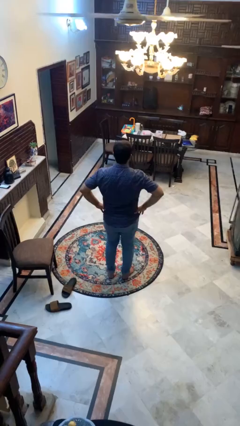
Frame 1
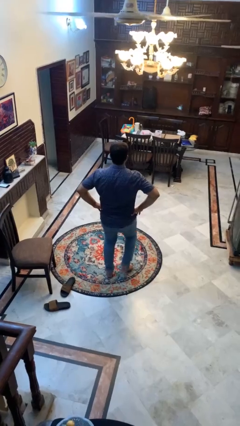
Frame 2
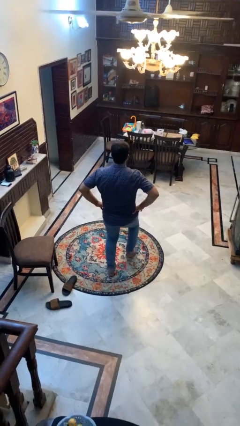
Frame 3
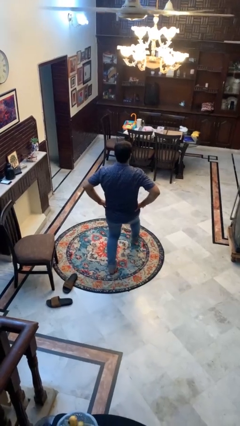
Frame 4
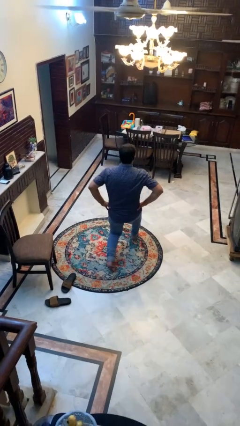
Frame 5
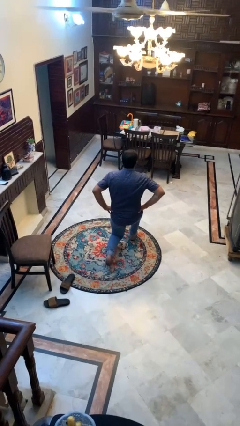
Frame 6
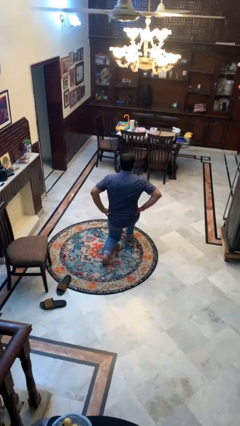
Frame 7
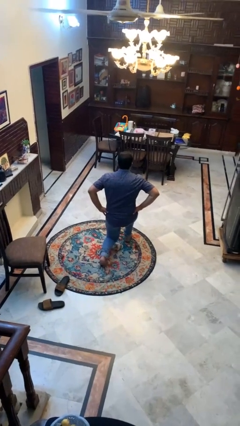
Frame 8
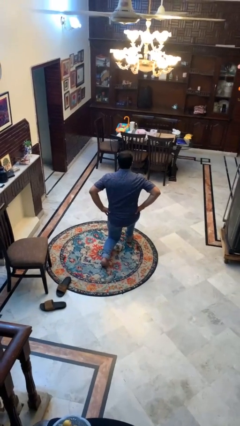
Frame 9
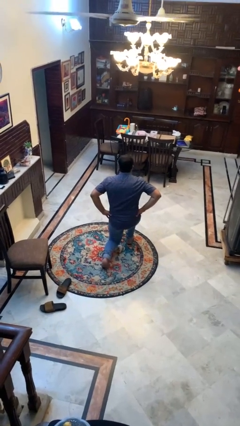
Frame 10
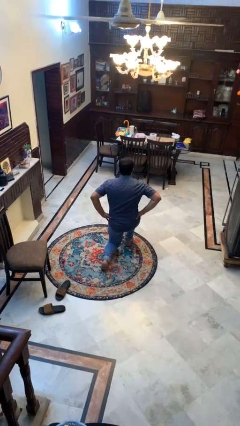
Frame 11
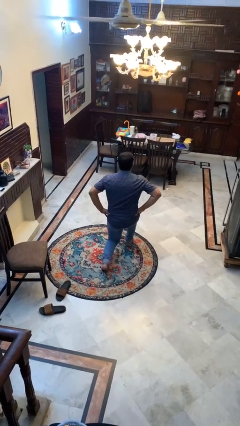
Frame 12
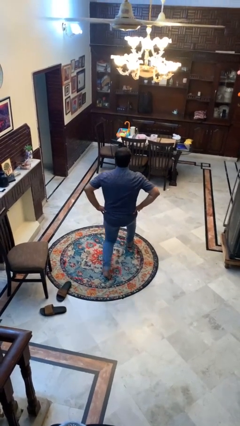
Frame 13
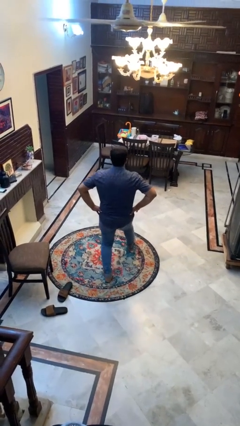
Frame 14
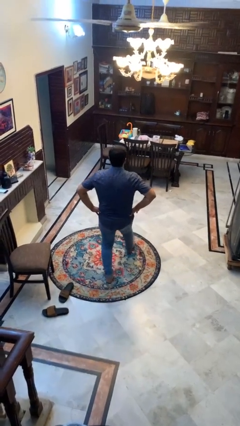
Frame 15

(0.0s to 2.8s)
person exercises with lunges

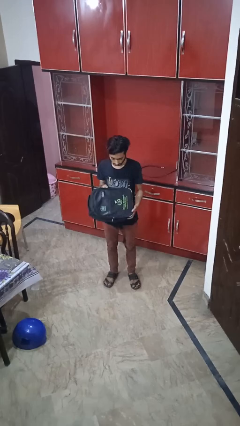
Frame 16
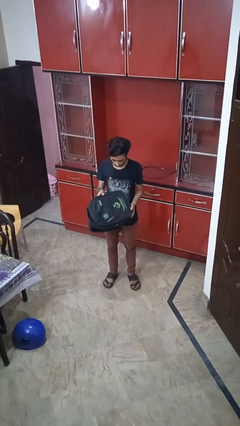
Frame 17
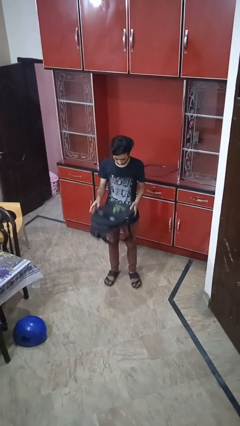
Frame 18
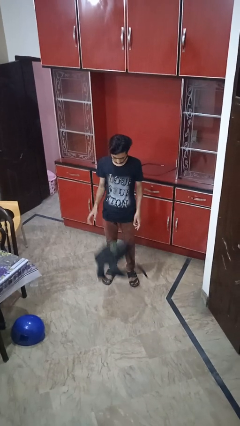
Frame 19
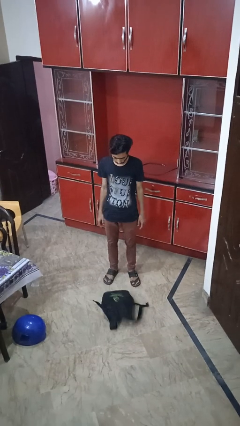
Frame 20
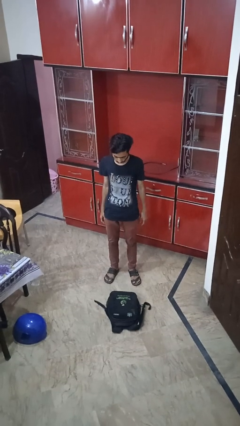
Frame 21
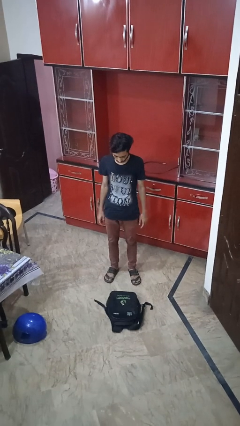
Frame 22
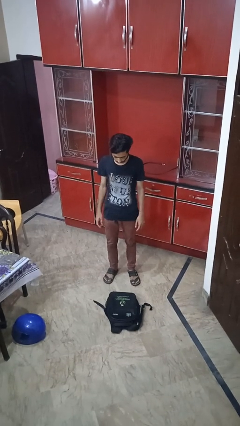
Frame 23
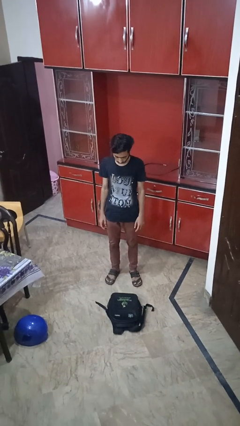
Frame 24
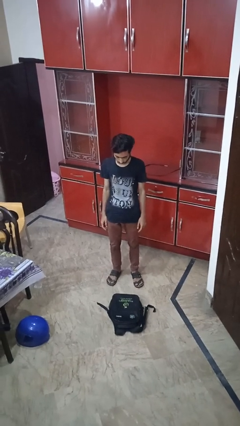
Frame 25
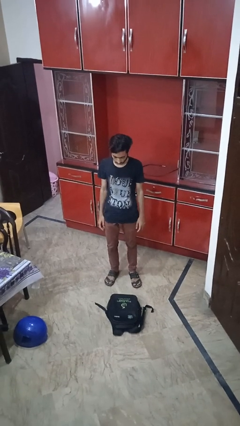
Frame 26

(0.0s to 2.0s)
person drops object

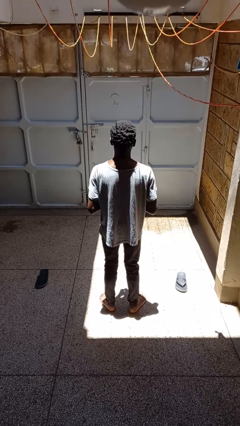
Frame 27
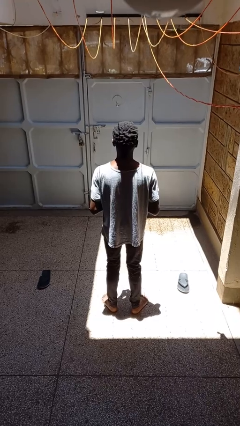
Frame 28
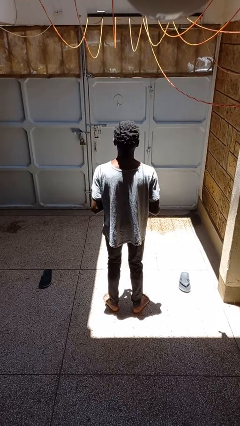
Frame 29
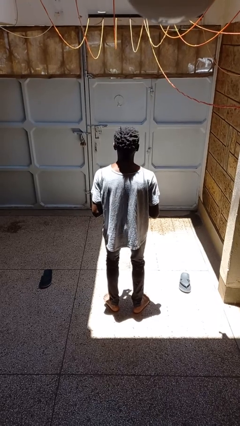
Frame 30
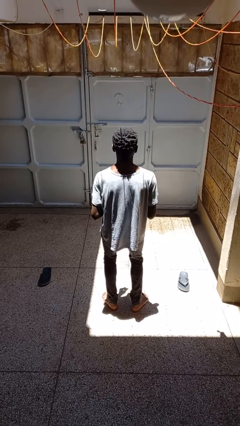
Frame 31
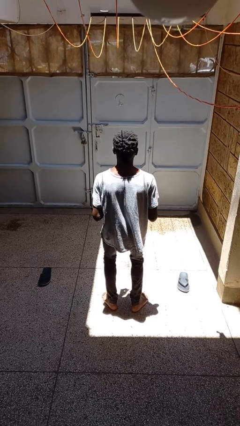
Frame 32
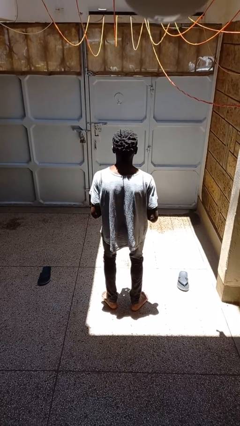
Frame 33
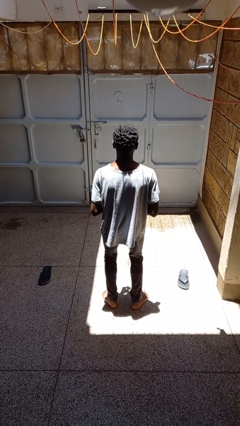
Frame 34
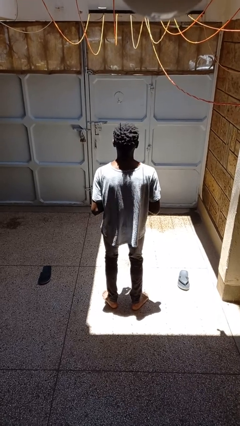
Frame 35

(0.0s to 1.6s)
person dances in place

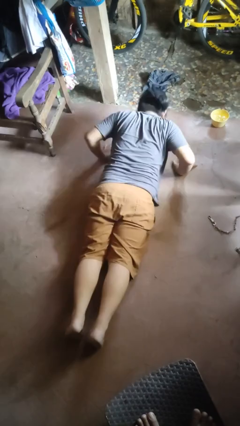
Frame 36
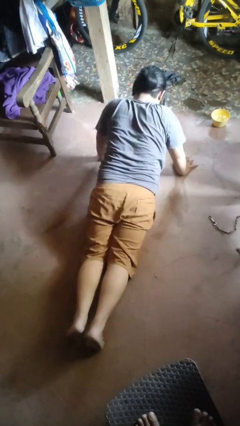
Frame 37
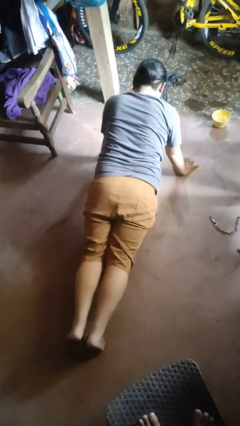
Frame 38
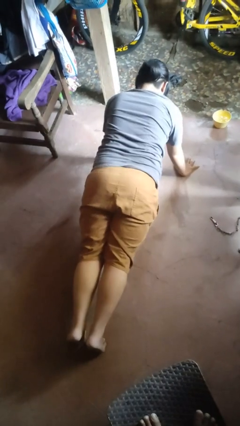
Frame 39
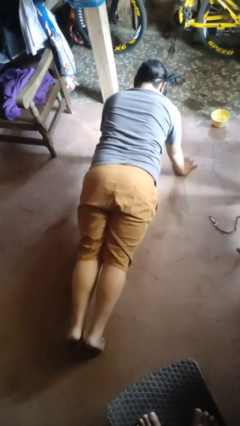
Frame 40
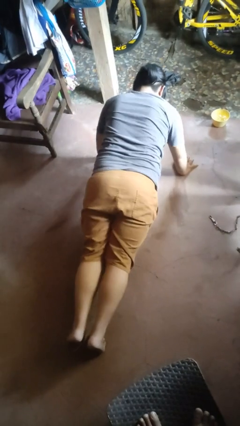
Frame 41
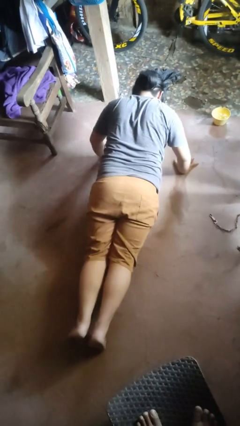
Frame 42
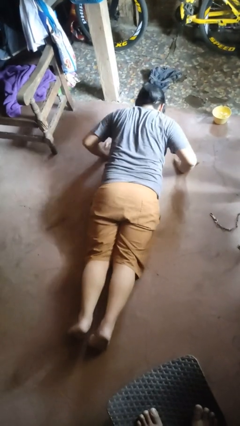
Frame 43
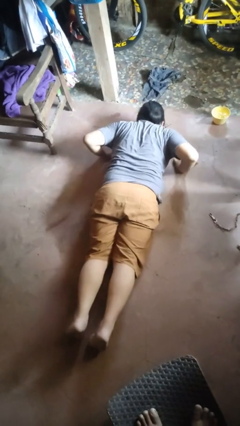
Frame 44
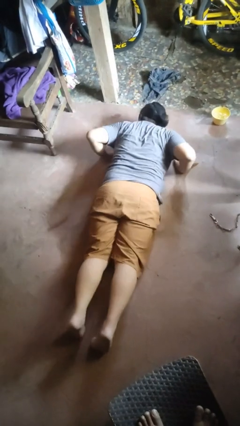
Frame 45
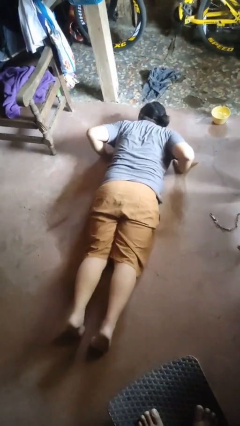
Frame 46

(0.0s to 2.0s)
person exercises with pushup

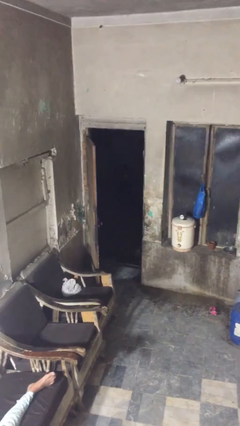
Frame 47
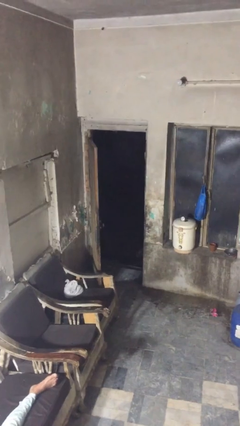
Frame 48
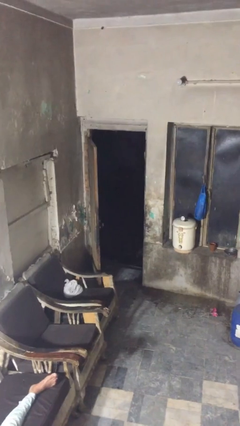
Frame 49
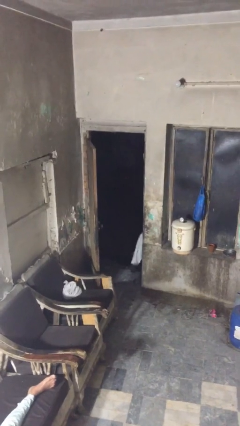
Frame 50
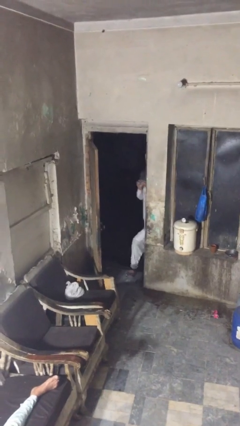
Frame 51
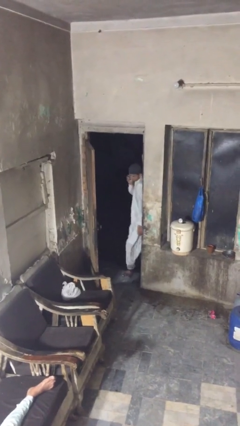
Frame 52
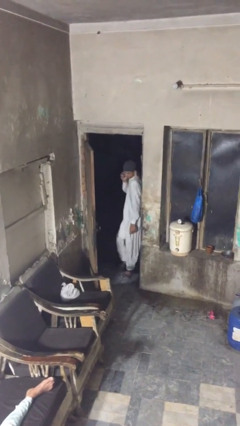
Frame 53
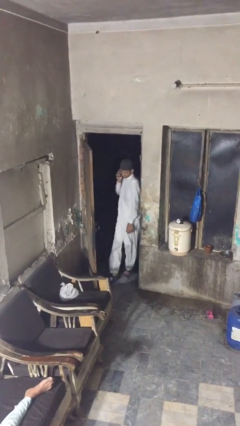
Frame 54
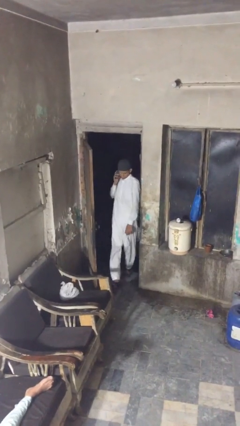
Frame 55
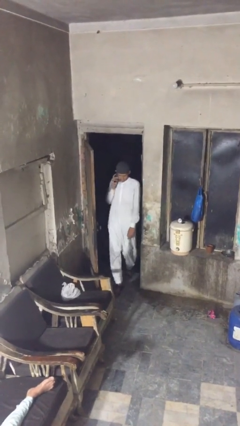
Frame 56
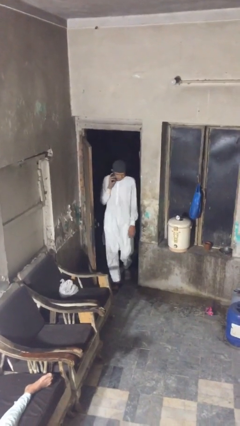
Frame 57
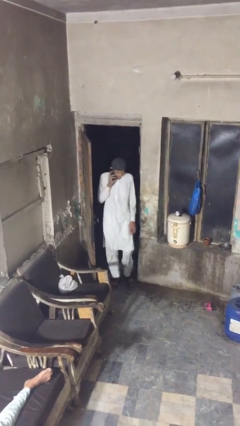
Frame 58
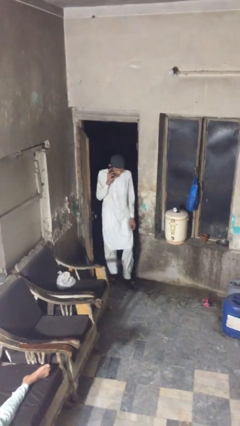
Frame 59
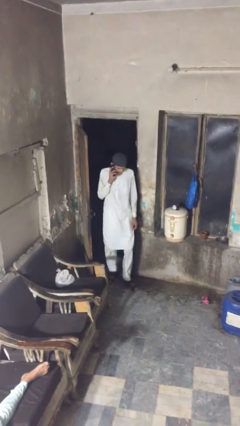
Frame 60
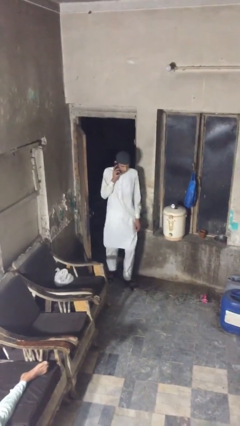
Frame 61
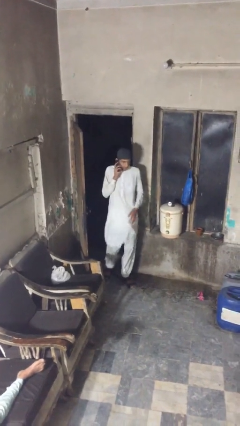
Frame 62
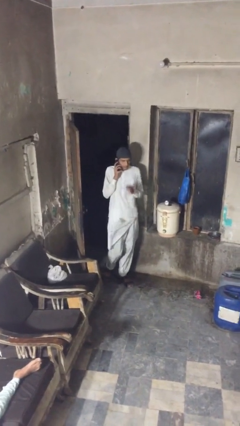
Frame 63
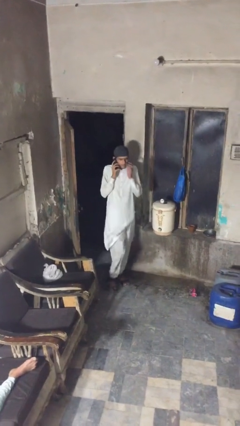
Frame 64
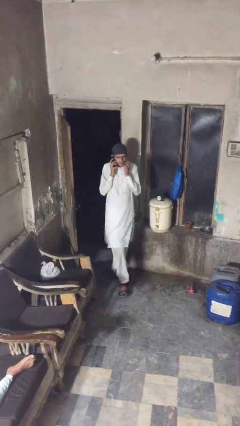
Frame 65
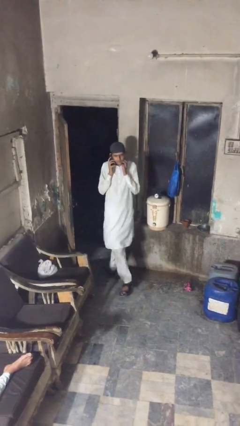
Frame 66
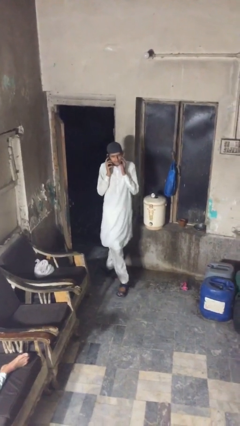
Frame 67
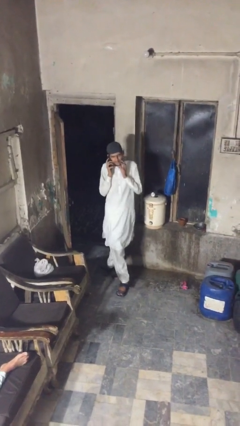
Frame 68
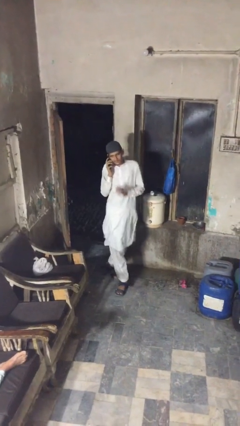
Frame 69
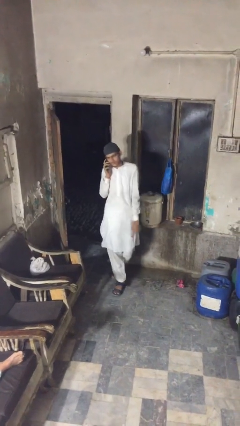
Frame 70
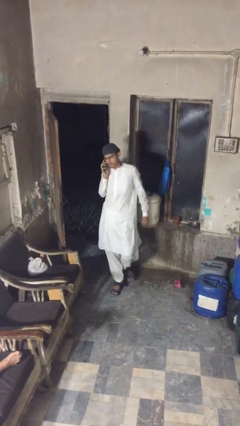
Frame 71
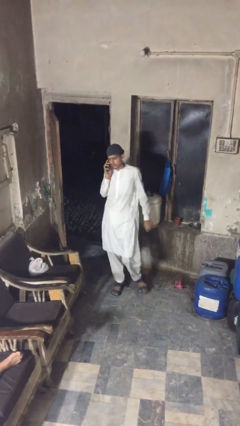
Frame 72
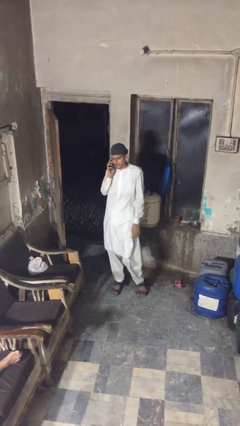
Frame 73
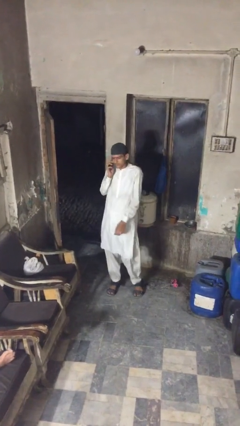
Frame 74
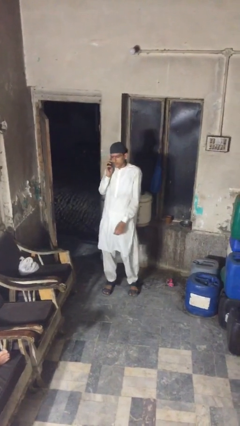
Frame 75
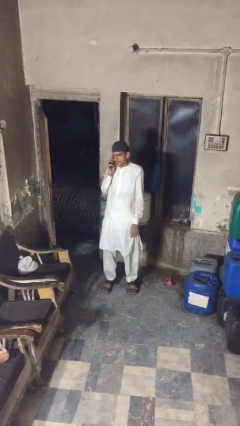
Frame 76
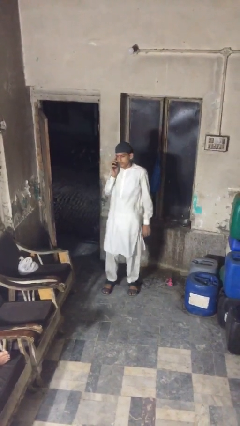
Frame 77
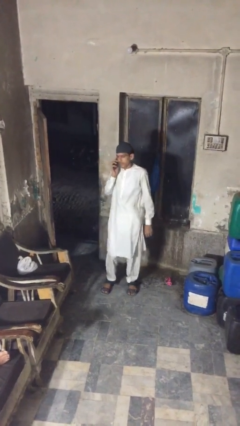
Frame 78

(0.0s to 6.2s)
person enters scene through structure

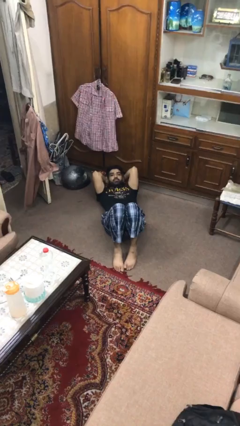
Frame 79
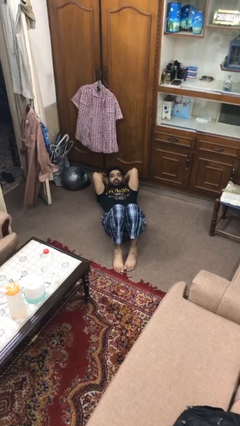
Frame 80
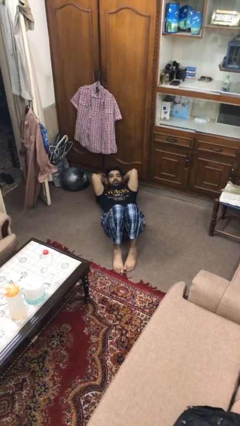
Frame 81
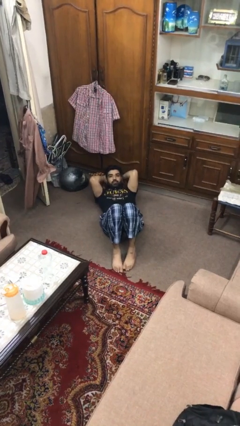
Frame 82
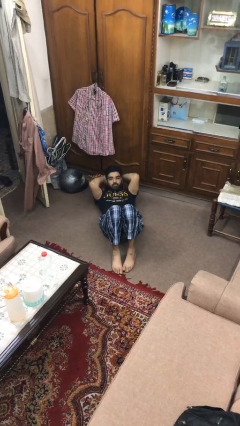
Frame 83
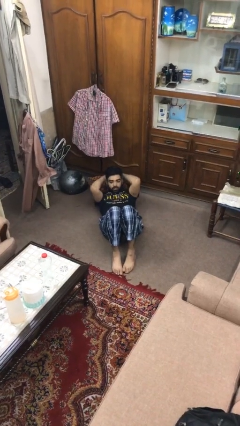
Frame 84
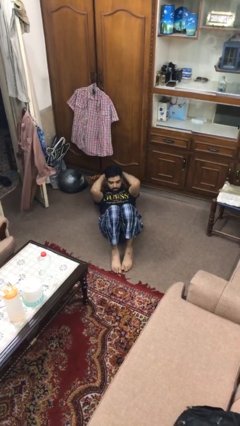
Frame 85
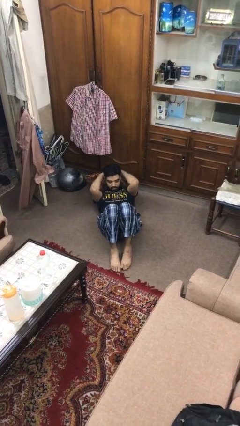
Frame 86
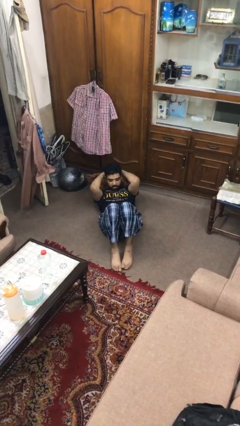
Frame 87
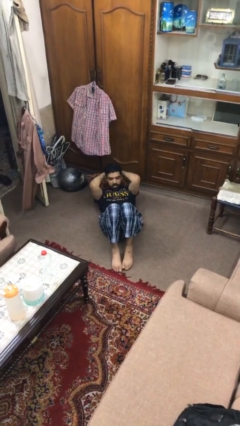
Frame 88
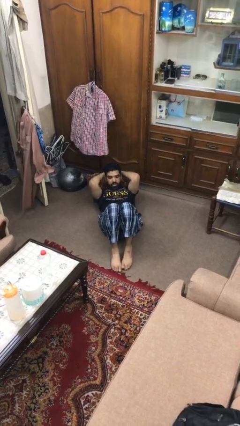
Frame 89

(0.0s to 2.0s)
person exercises with situp

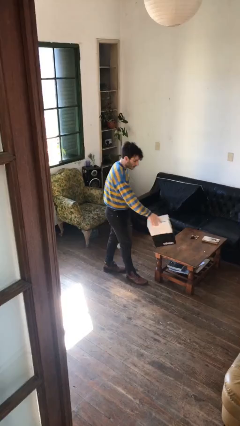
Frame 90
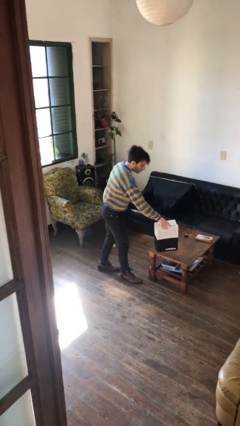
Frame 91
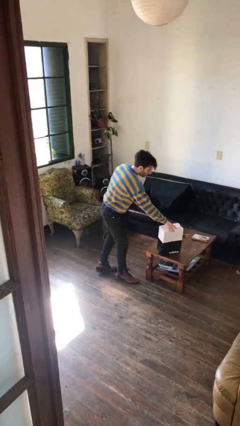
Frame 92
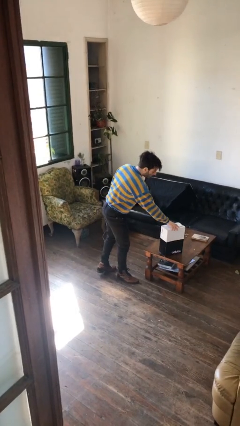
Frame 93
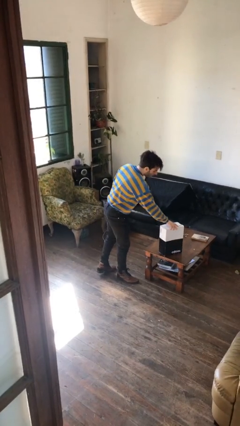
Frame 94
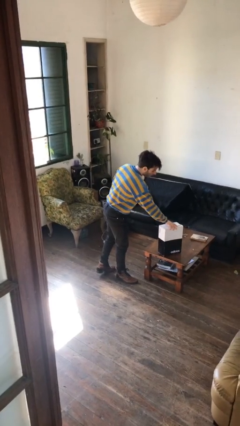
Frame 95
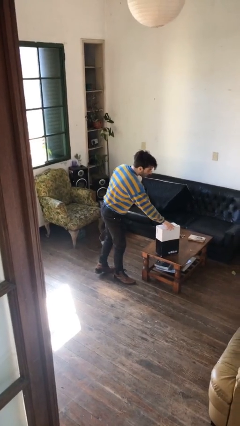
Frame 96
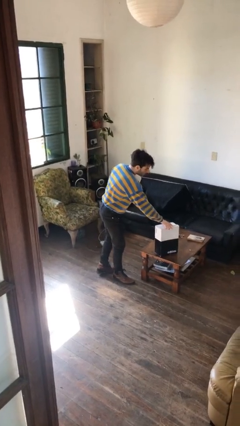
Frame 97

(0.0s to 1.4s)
person puts down object on table
